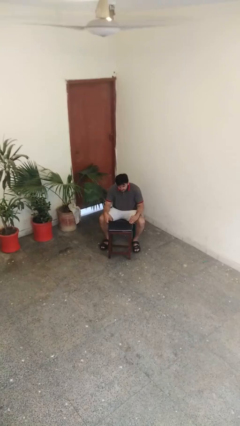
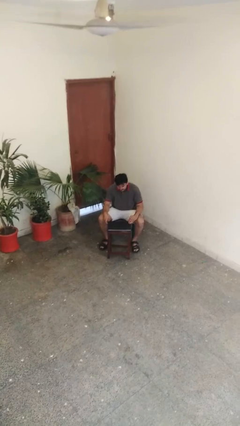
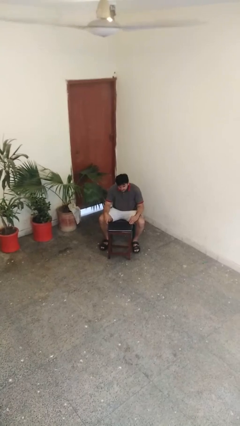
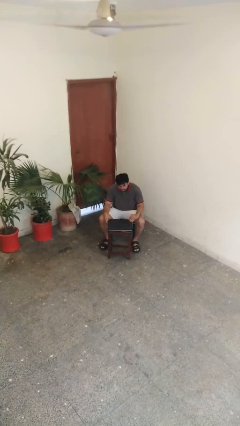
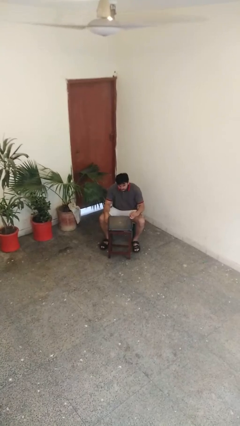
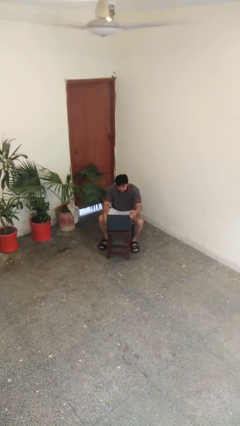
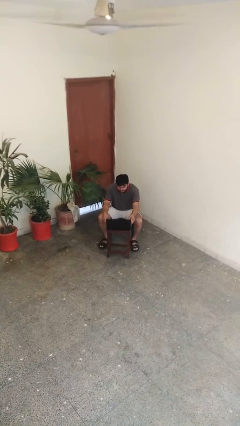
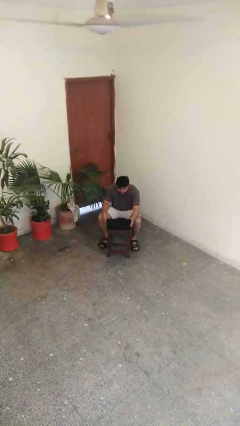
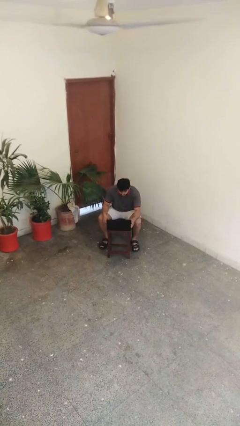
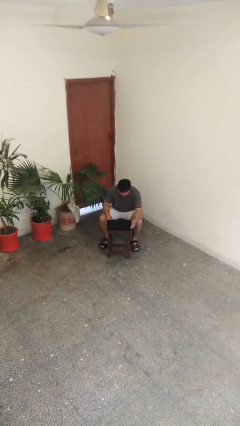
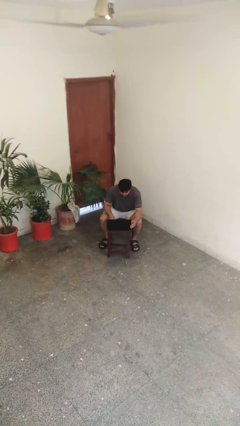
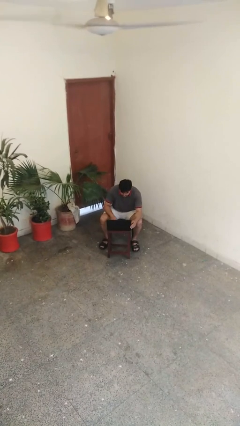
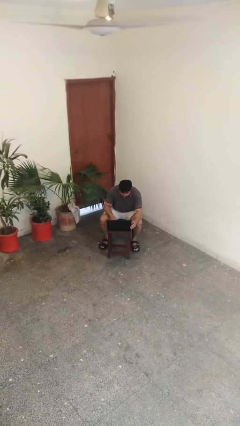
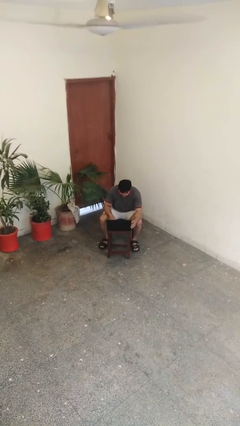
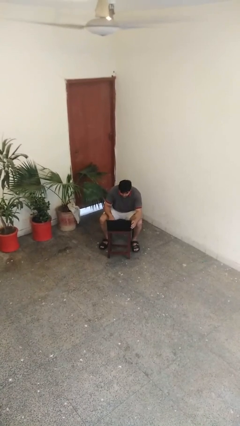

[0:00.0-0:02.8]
person opens laptop

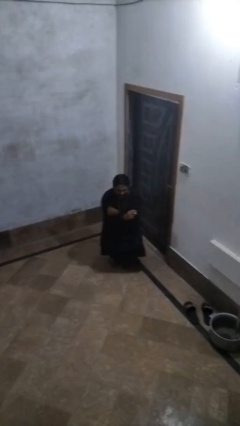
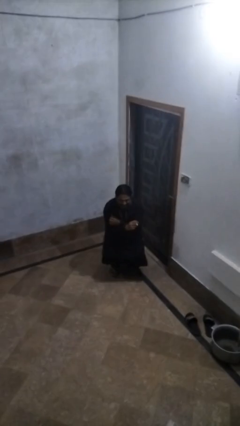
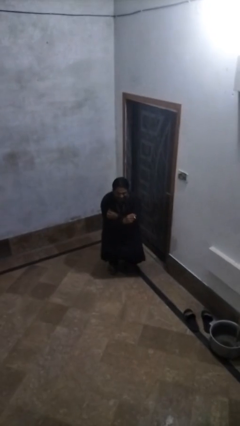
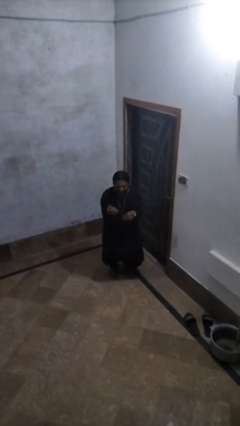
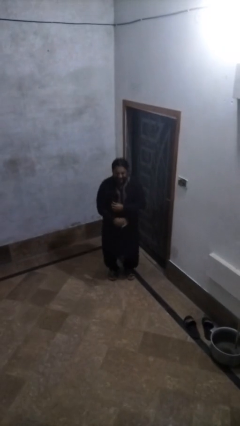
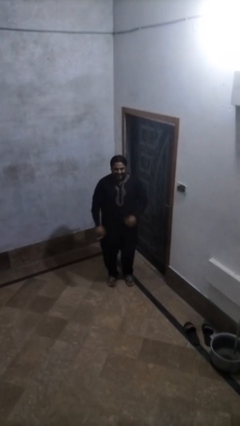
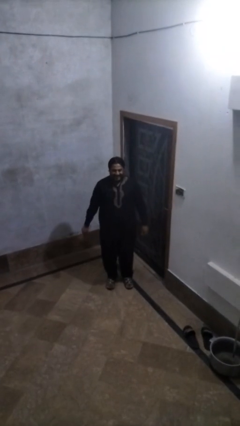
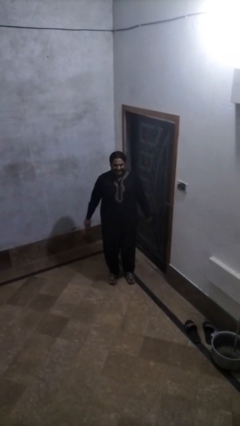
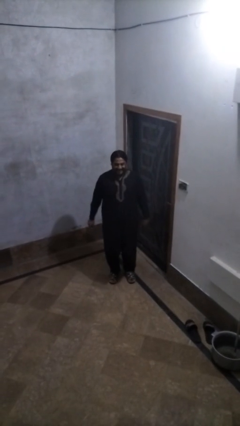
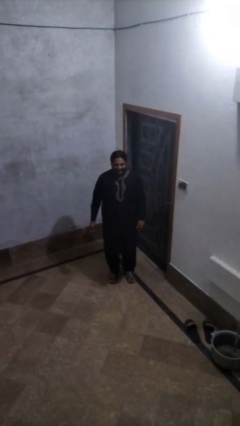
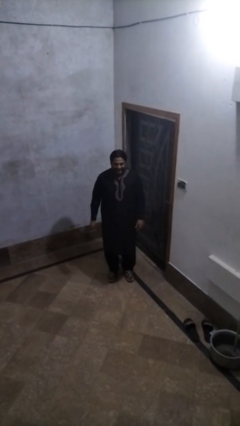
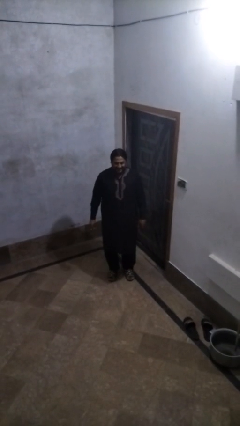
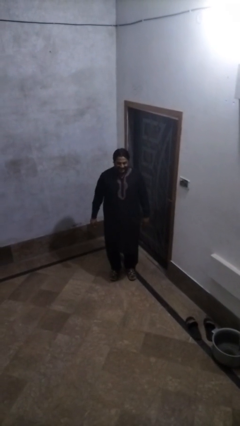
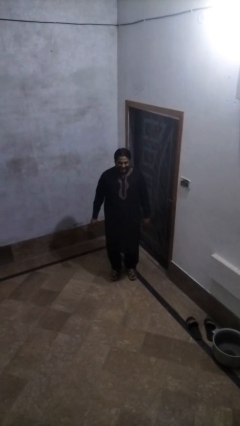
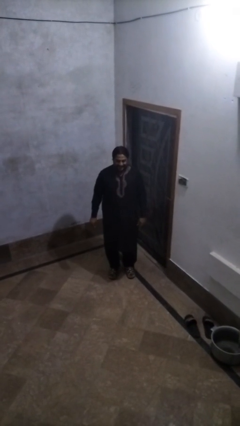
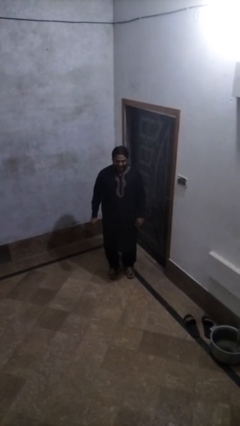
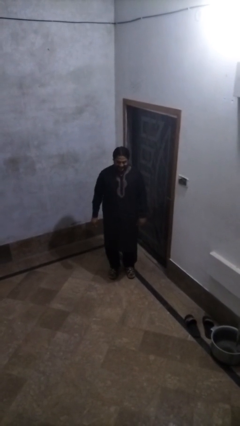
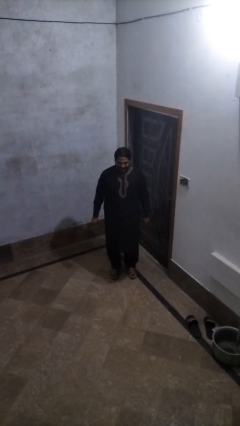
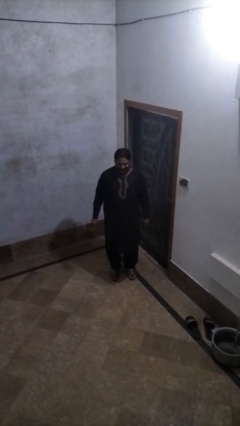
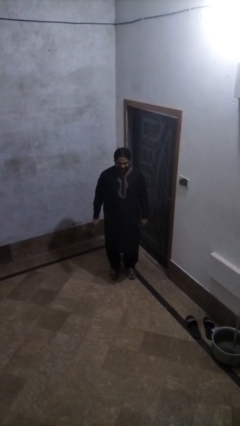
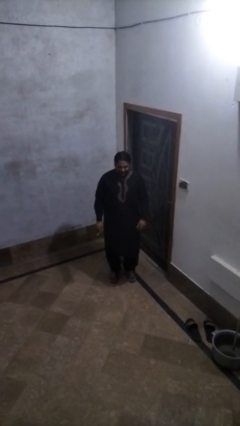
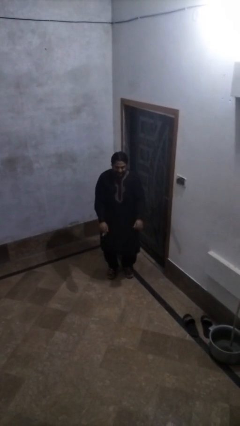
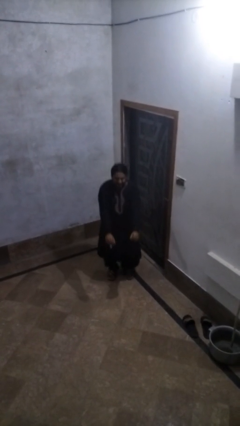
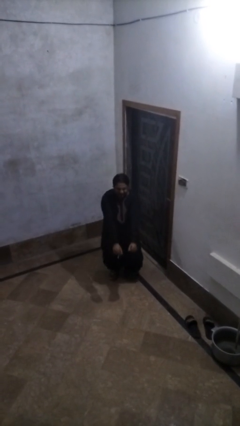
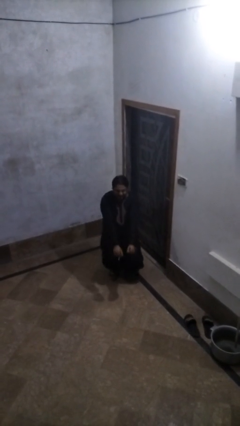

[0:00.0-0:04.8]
person stands up

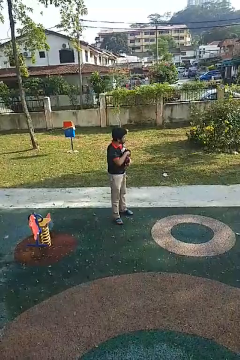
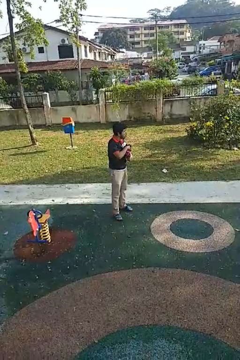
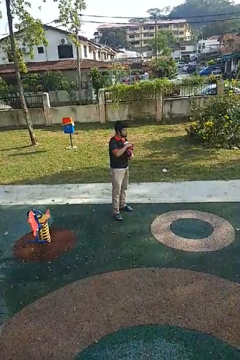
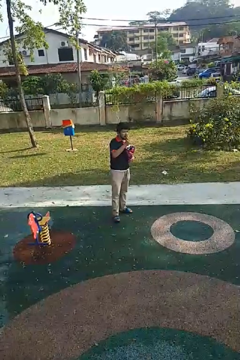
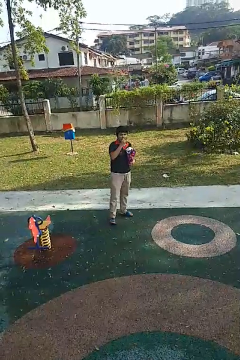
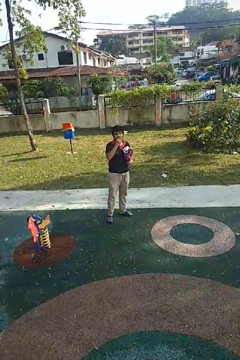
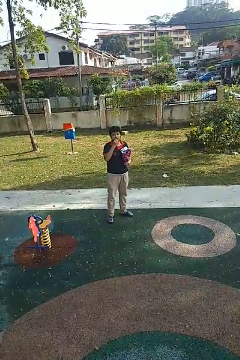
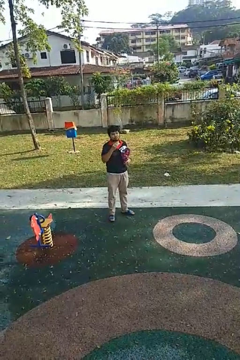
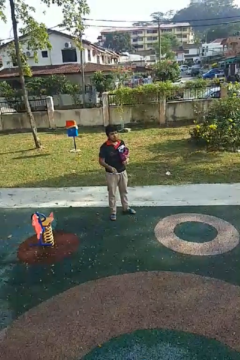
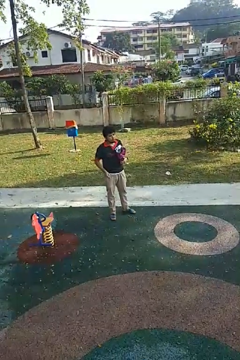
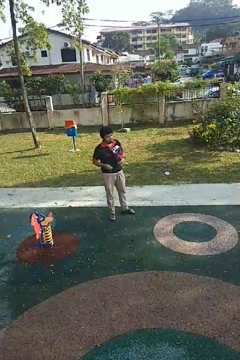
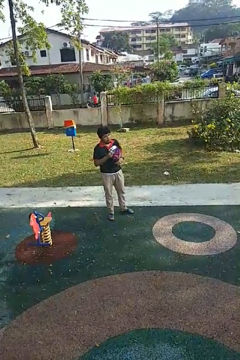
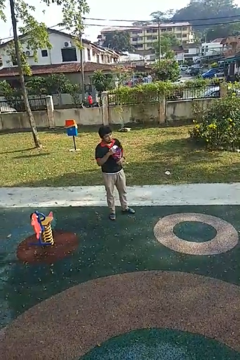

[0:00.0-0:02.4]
person eats snack from bag

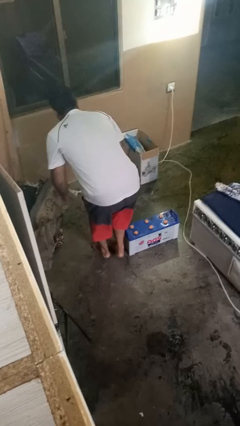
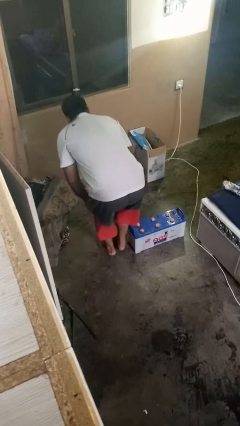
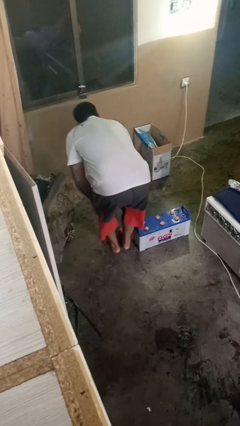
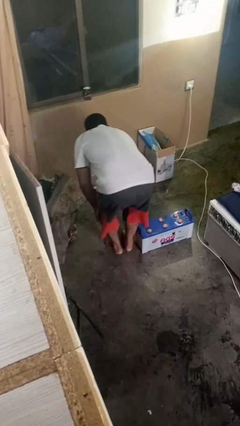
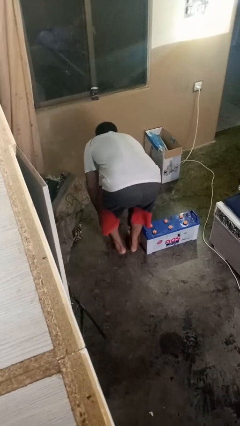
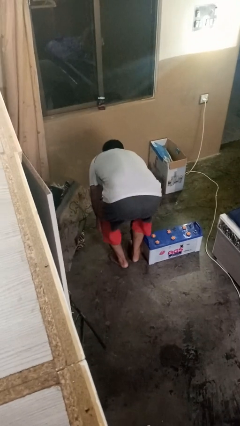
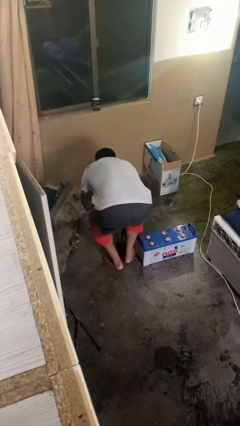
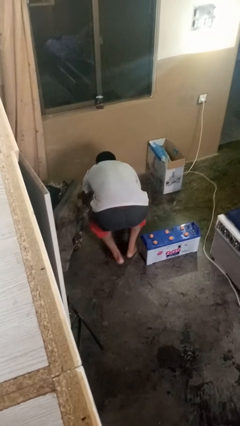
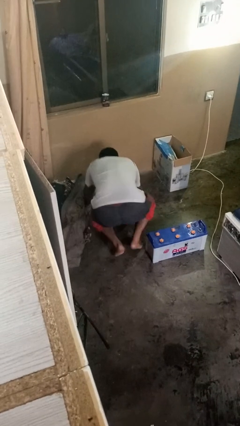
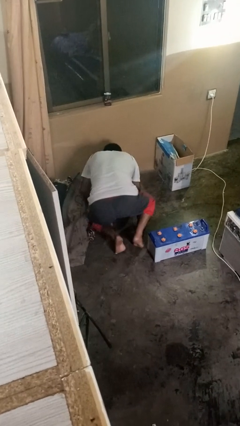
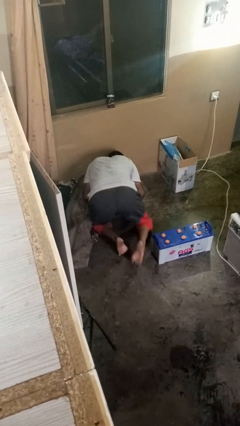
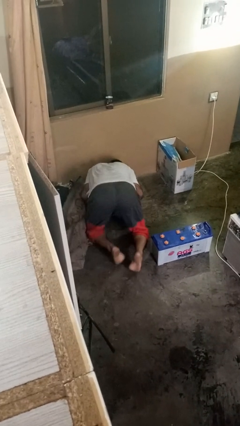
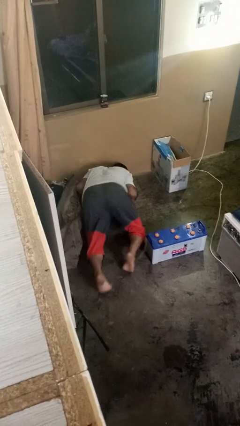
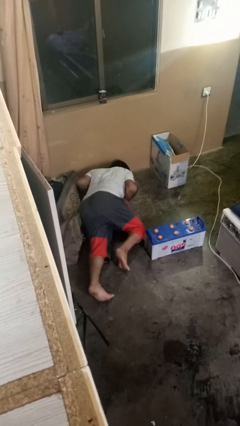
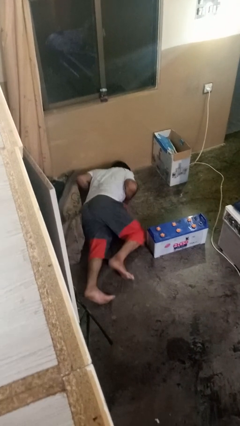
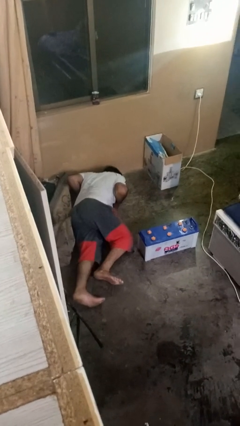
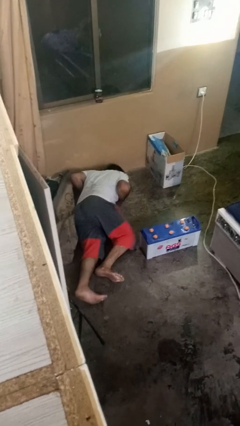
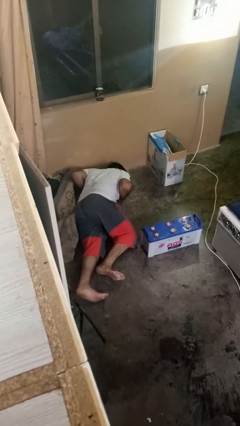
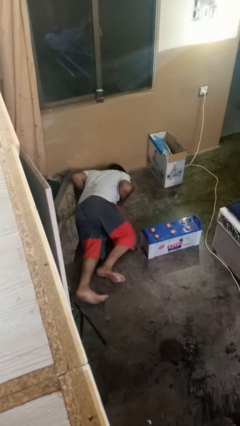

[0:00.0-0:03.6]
person lies down on floor

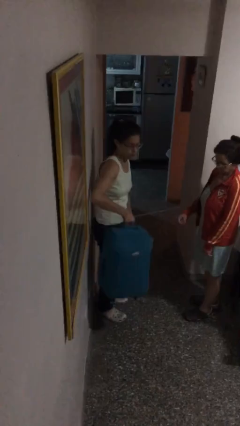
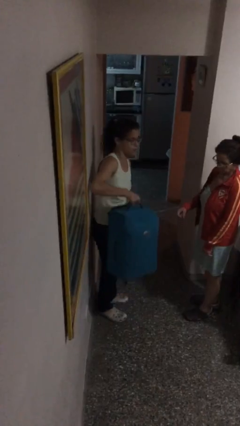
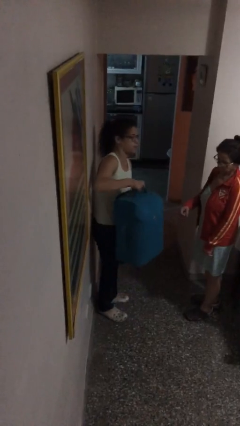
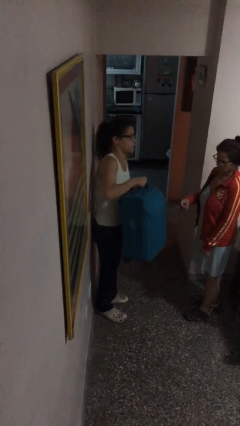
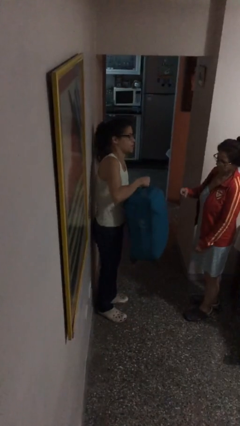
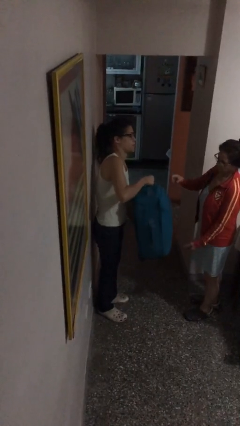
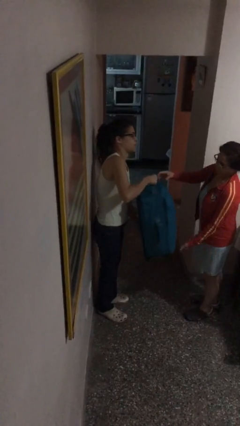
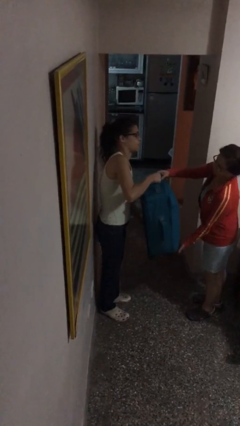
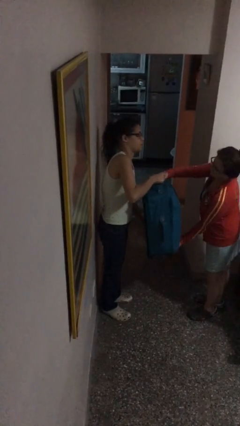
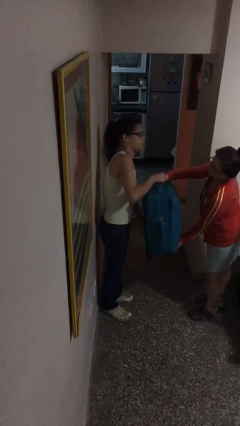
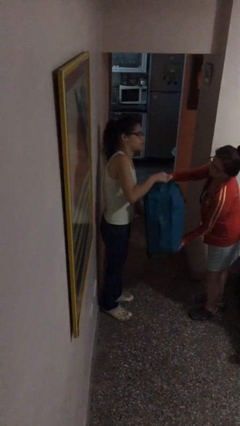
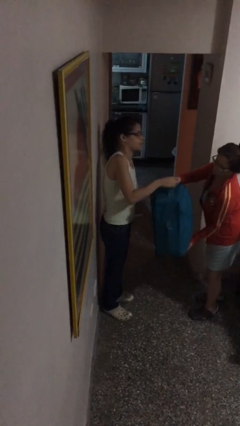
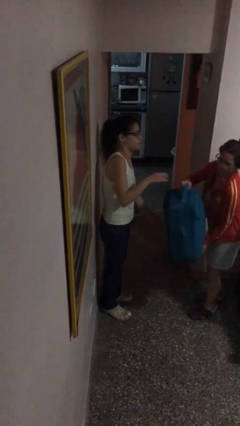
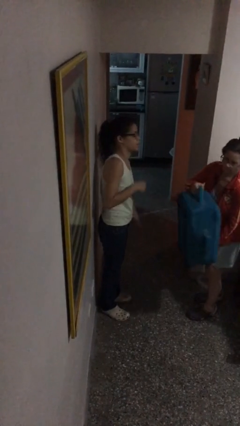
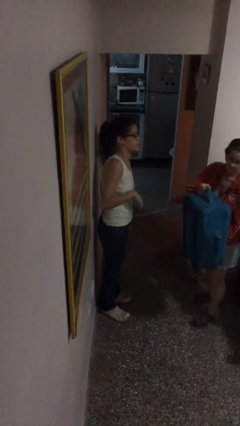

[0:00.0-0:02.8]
person transfers object to person

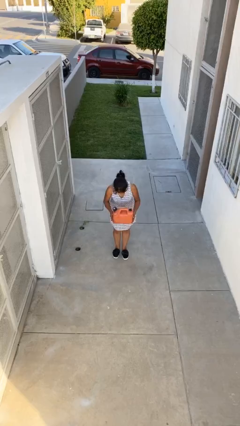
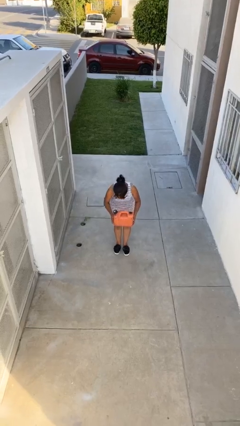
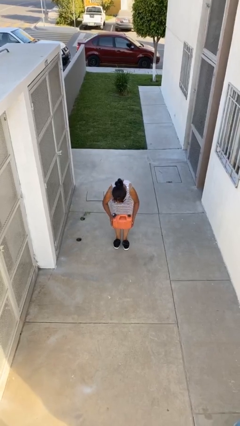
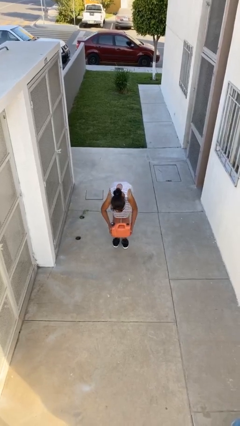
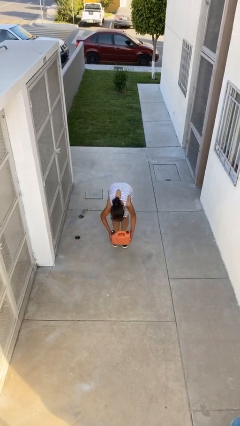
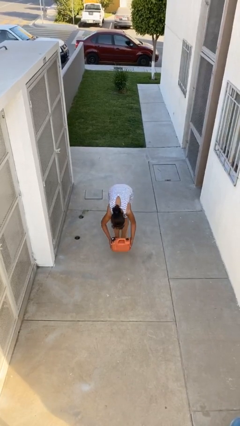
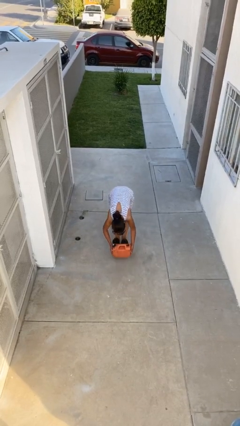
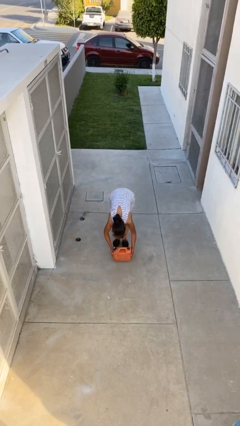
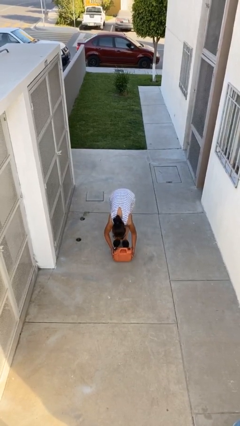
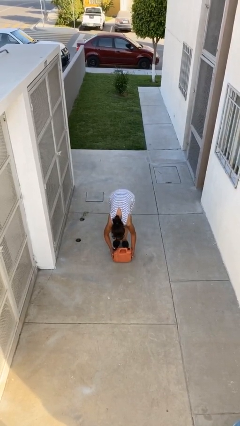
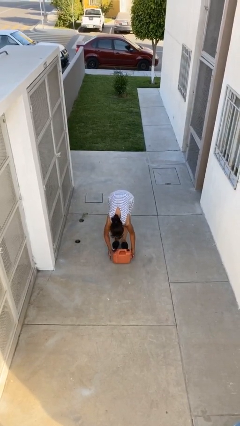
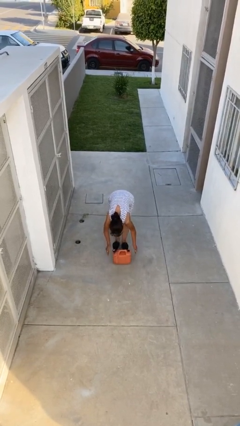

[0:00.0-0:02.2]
person puts down object on floor
